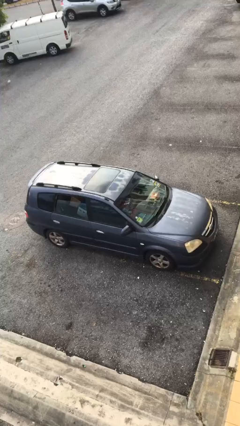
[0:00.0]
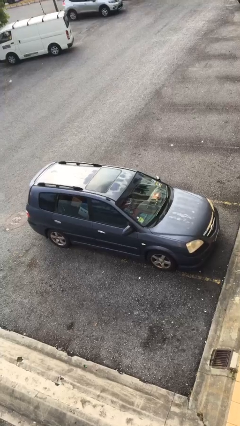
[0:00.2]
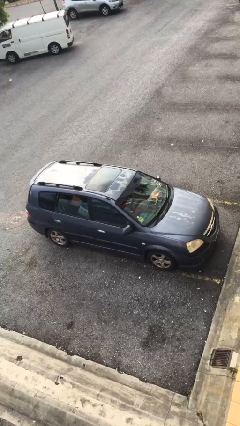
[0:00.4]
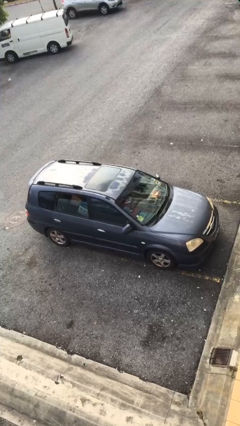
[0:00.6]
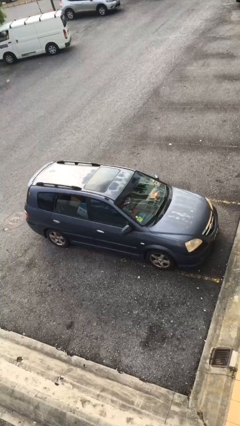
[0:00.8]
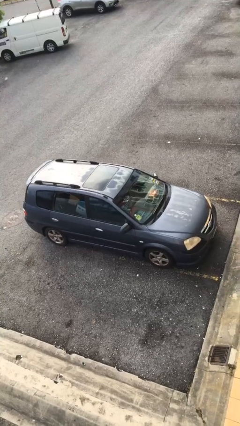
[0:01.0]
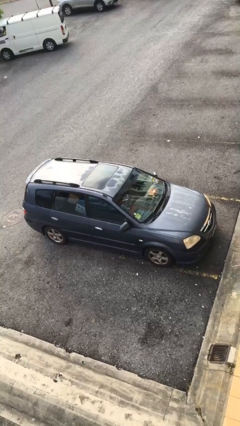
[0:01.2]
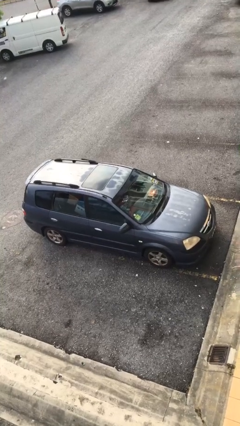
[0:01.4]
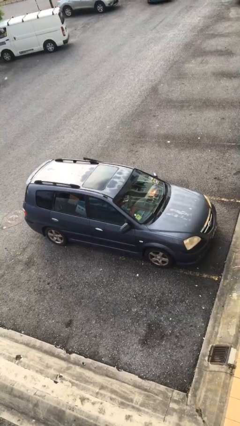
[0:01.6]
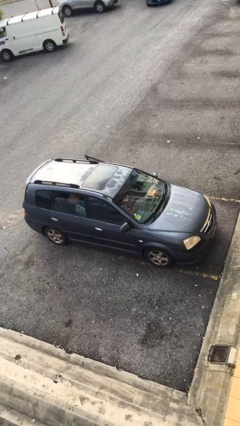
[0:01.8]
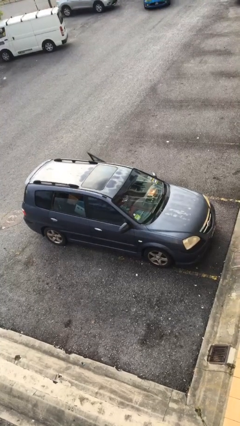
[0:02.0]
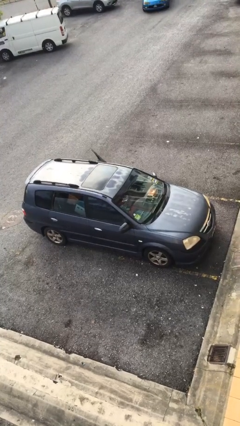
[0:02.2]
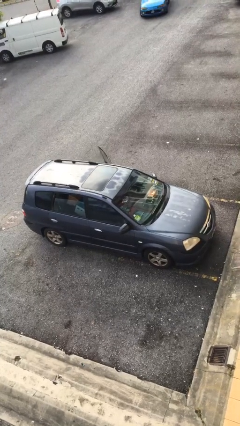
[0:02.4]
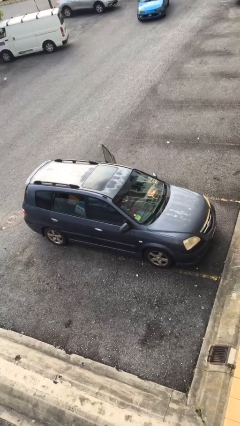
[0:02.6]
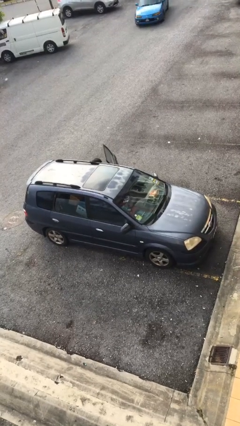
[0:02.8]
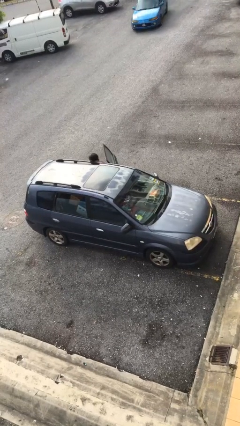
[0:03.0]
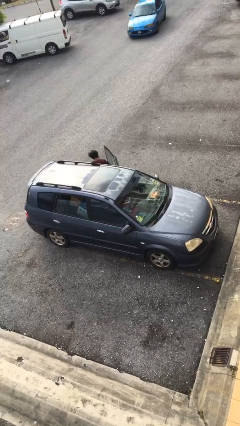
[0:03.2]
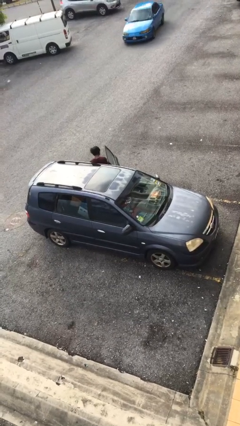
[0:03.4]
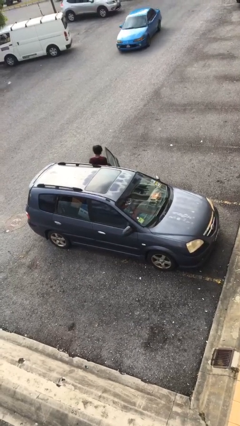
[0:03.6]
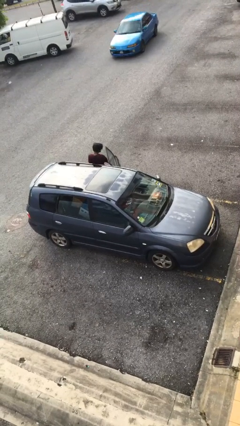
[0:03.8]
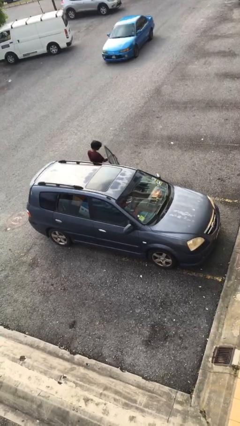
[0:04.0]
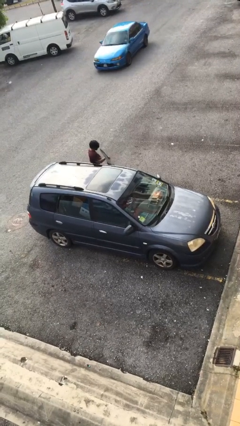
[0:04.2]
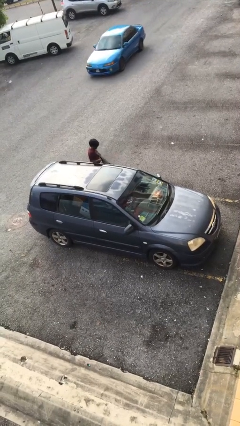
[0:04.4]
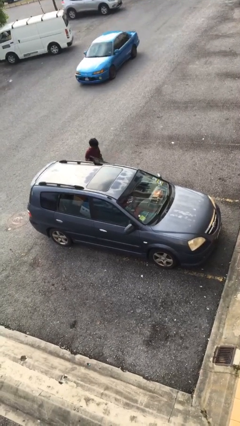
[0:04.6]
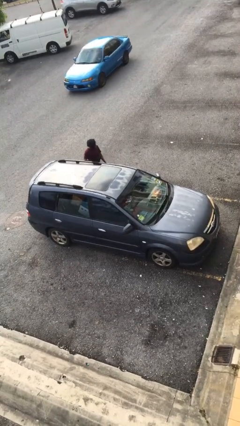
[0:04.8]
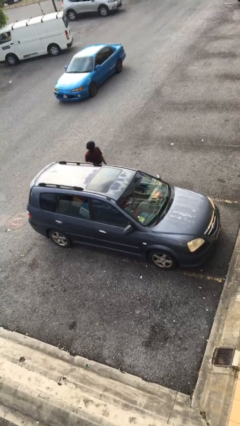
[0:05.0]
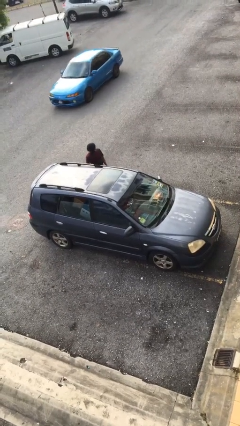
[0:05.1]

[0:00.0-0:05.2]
car drops off person

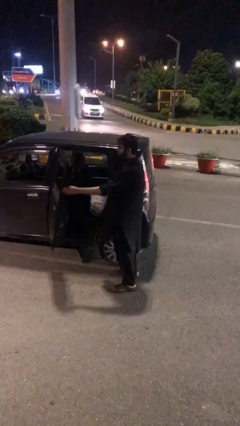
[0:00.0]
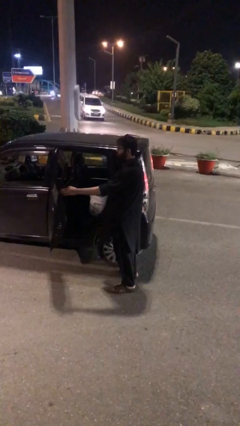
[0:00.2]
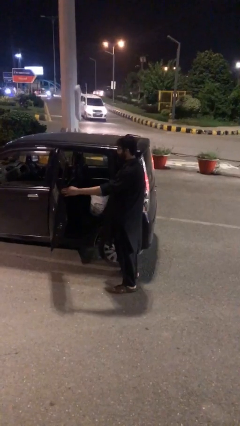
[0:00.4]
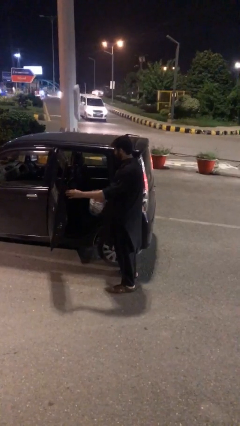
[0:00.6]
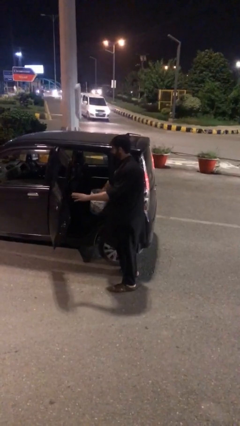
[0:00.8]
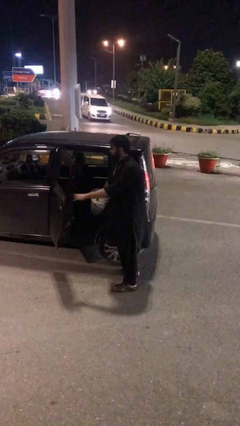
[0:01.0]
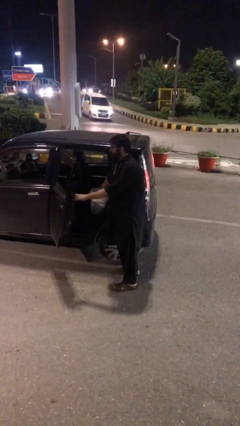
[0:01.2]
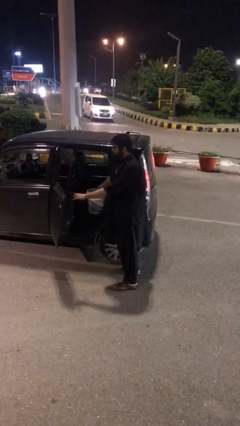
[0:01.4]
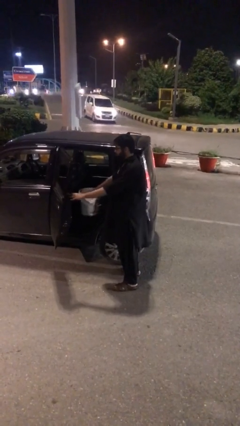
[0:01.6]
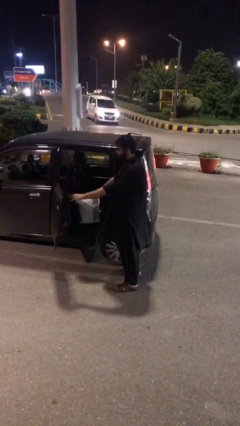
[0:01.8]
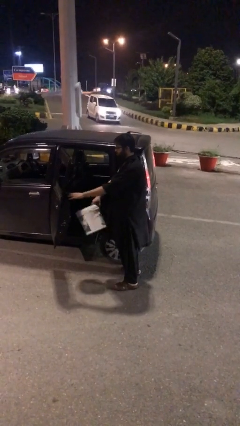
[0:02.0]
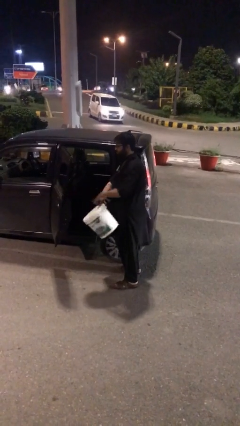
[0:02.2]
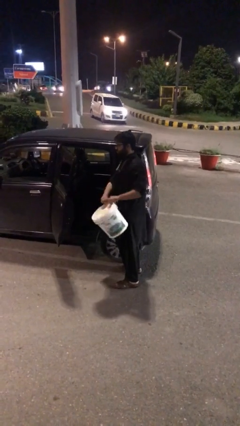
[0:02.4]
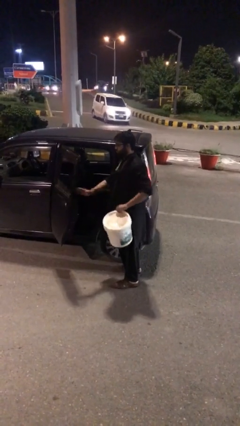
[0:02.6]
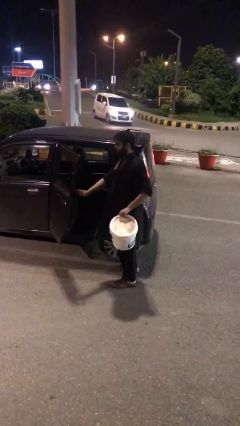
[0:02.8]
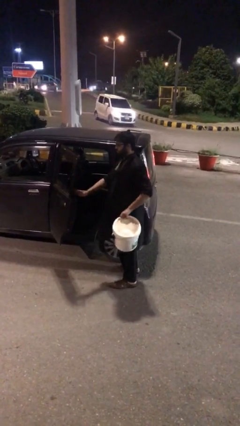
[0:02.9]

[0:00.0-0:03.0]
person unloads car

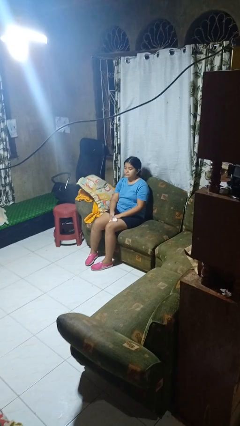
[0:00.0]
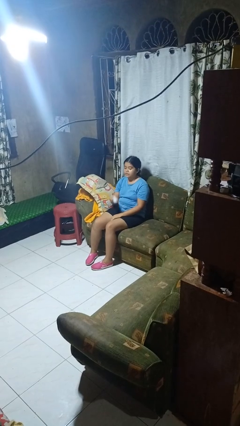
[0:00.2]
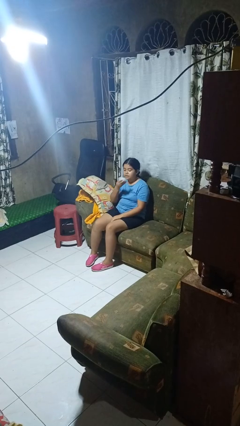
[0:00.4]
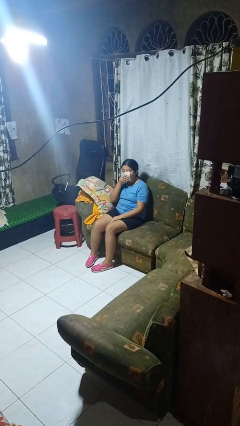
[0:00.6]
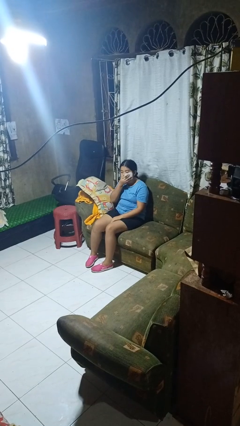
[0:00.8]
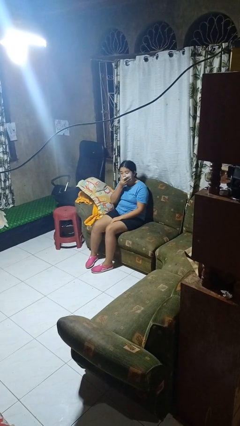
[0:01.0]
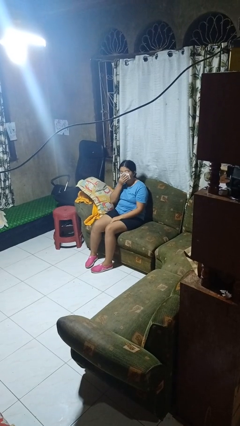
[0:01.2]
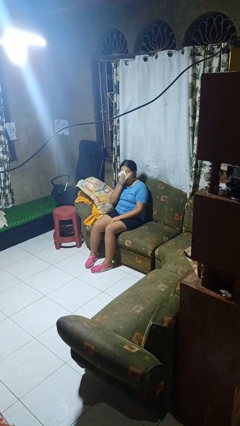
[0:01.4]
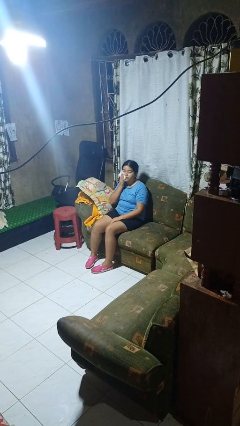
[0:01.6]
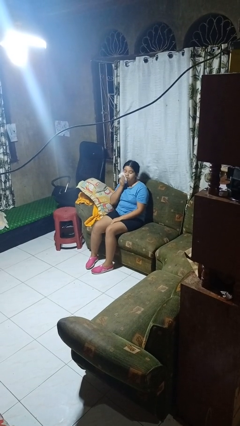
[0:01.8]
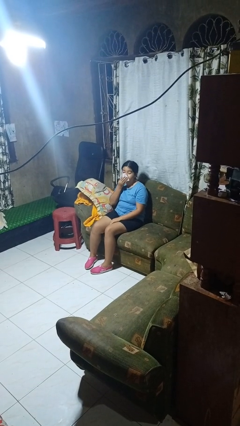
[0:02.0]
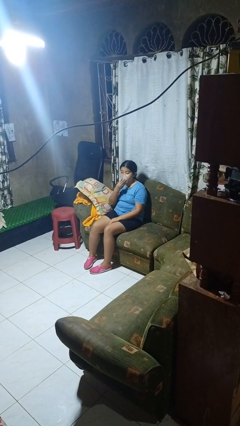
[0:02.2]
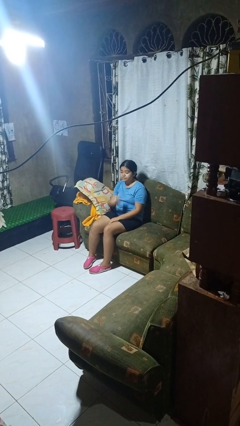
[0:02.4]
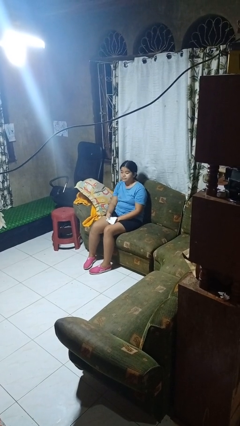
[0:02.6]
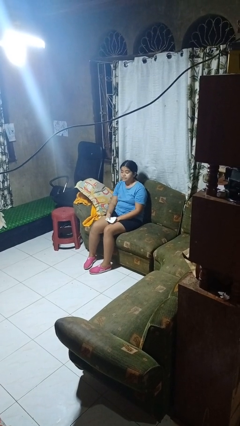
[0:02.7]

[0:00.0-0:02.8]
person wipes mouth with napkin

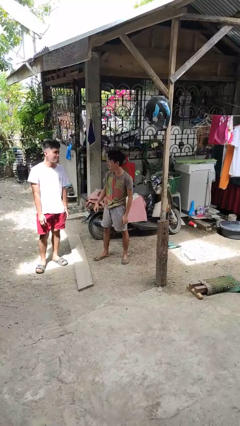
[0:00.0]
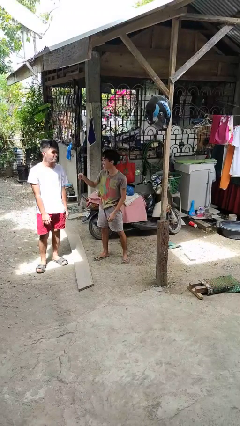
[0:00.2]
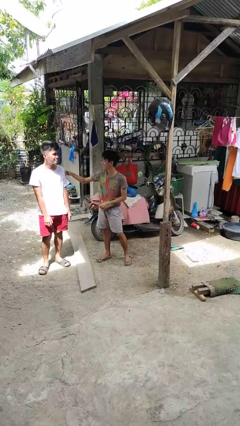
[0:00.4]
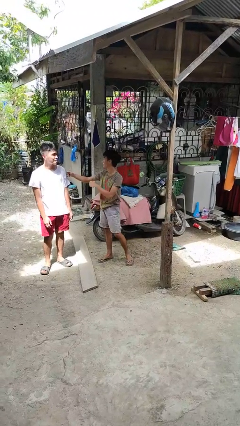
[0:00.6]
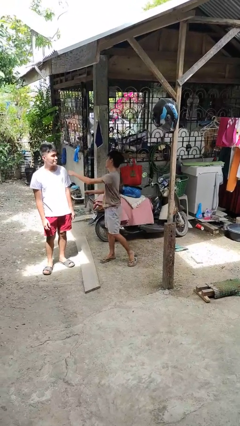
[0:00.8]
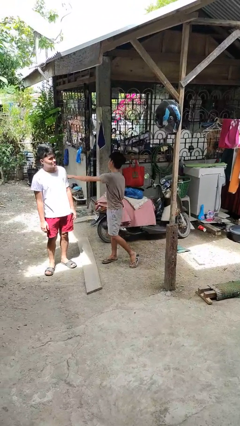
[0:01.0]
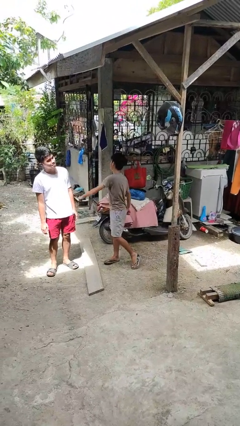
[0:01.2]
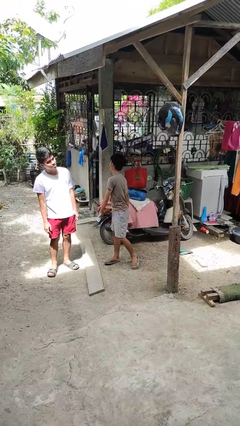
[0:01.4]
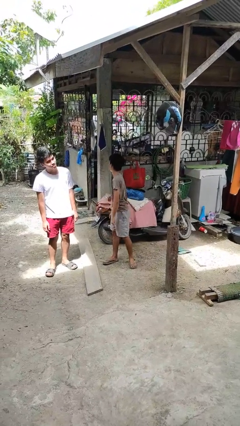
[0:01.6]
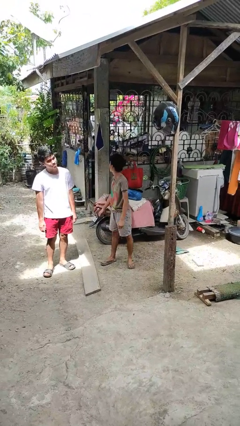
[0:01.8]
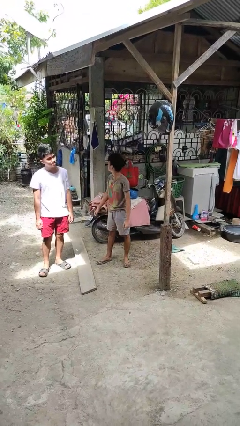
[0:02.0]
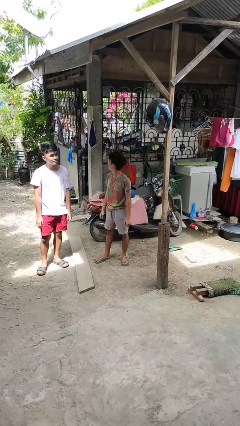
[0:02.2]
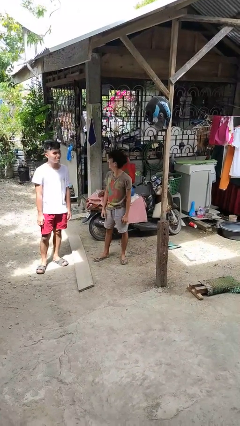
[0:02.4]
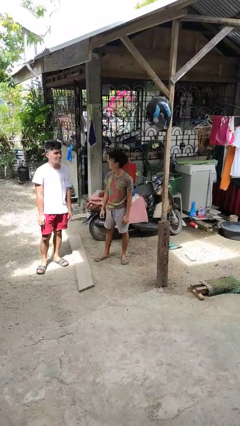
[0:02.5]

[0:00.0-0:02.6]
person pounds shoulders of person

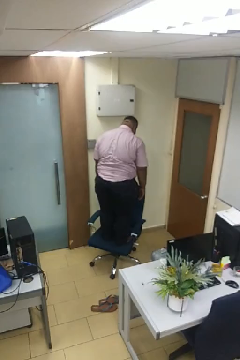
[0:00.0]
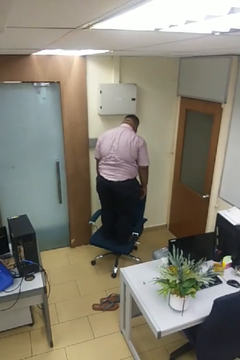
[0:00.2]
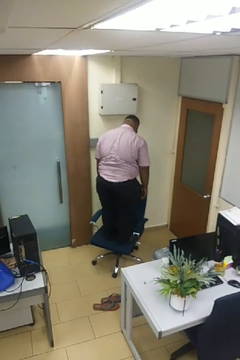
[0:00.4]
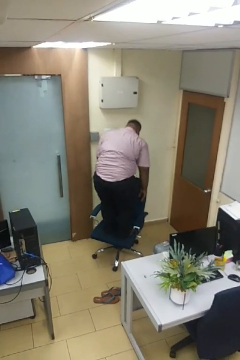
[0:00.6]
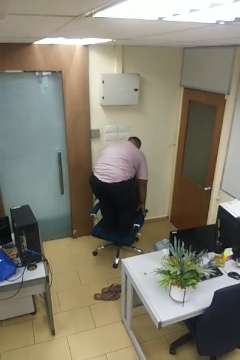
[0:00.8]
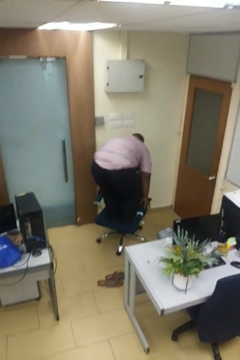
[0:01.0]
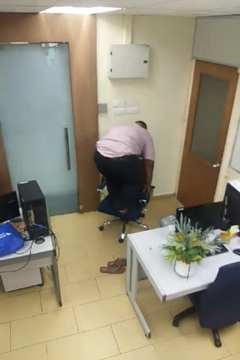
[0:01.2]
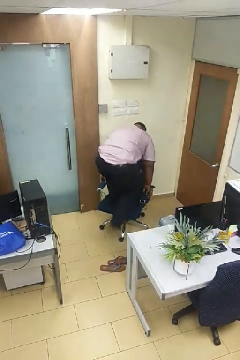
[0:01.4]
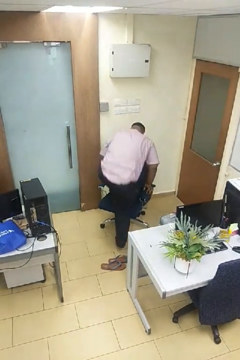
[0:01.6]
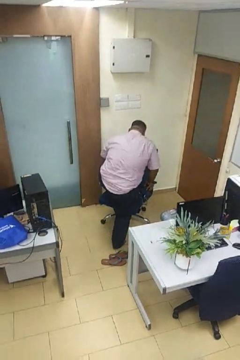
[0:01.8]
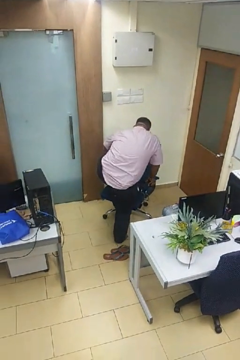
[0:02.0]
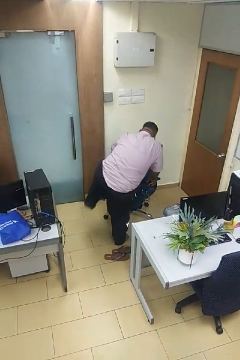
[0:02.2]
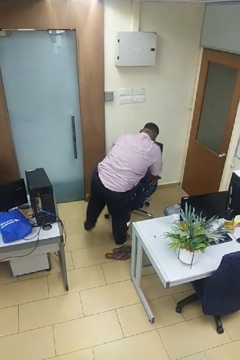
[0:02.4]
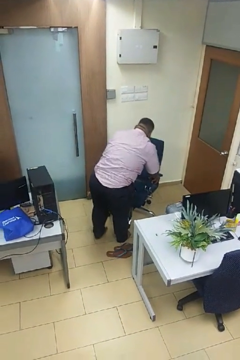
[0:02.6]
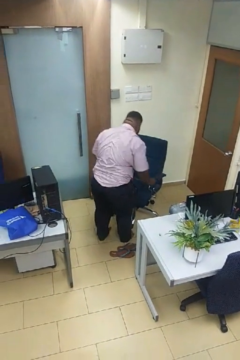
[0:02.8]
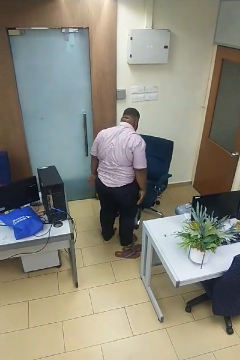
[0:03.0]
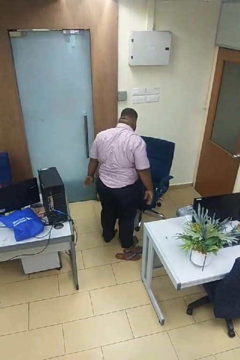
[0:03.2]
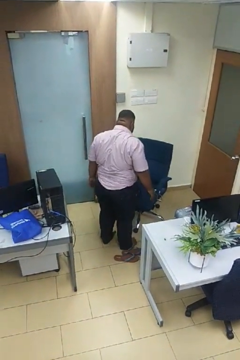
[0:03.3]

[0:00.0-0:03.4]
person climbs off chair

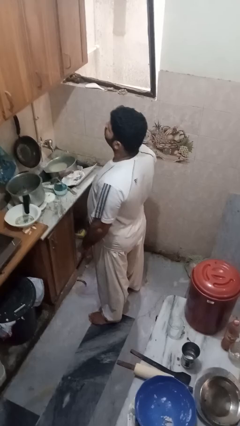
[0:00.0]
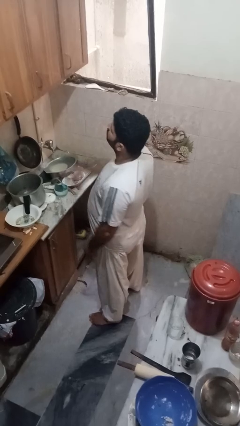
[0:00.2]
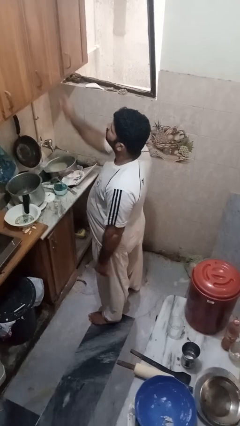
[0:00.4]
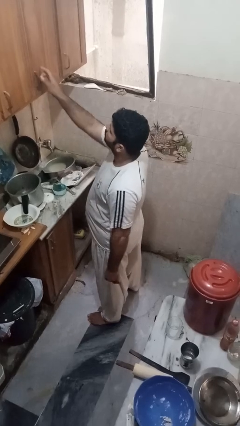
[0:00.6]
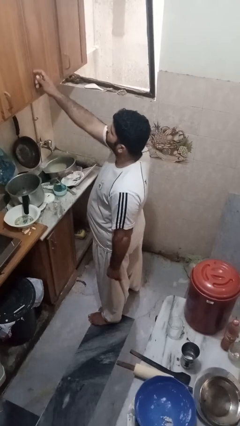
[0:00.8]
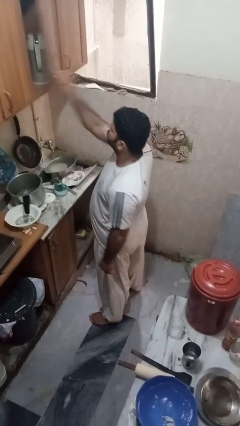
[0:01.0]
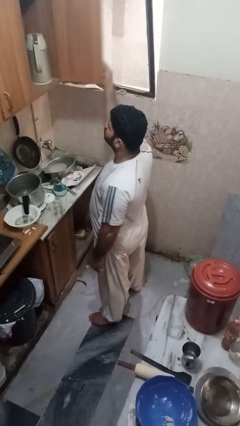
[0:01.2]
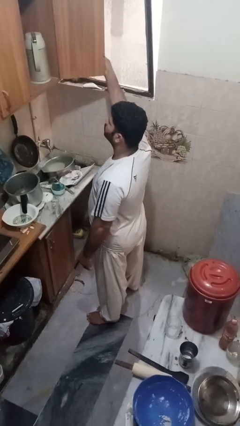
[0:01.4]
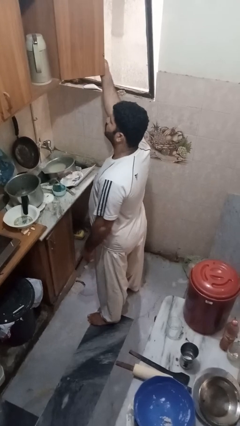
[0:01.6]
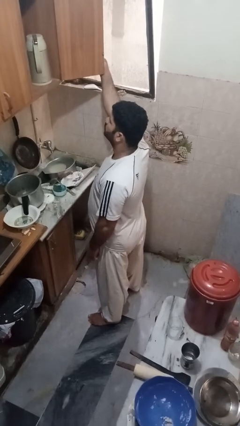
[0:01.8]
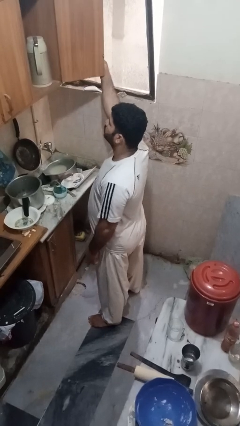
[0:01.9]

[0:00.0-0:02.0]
person opens cabinet
